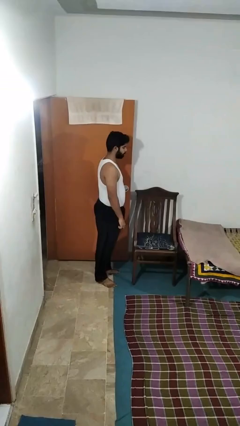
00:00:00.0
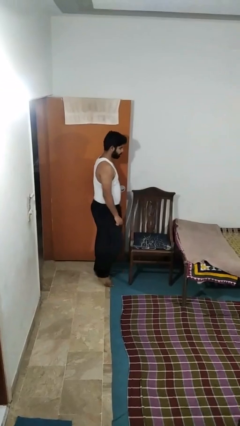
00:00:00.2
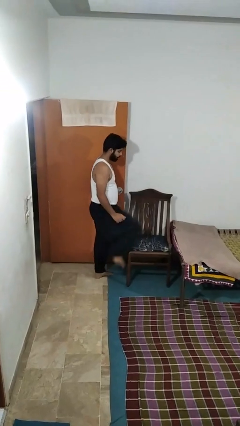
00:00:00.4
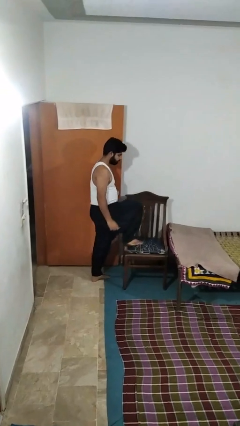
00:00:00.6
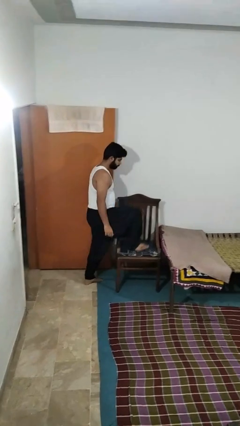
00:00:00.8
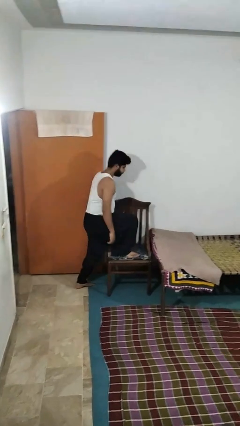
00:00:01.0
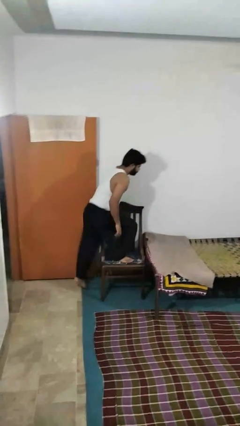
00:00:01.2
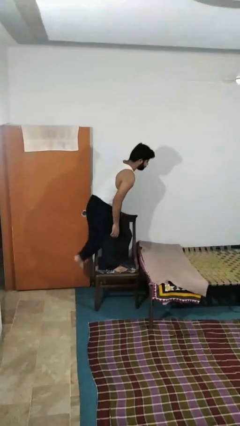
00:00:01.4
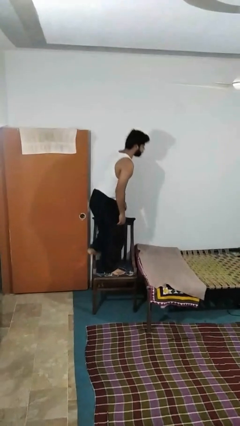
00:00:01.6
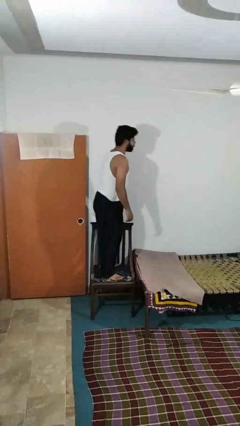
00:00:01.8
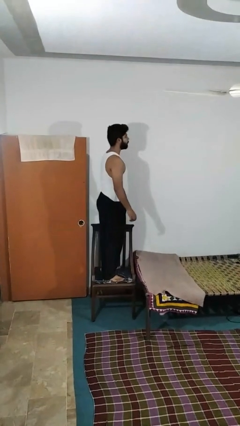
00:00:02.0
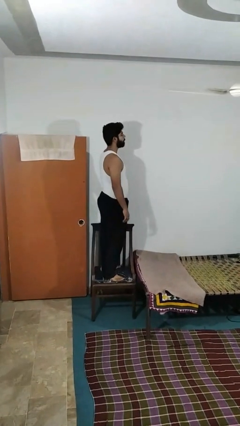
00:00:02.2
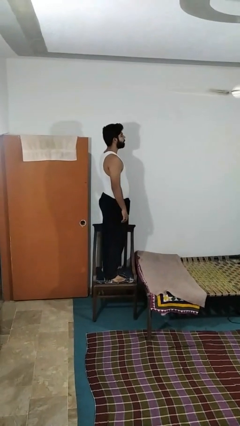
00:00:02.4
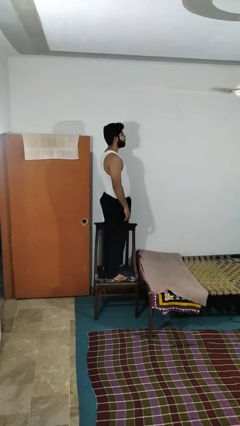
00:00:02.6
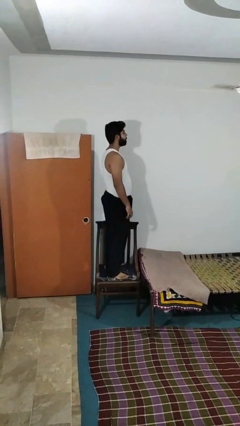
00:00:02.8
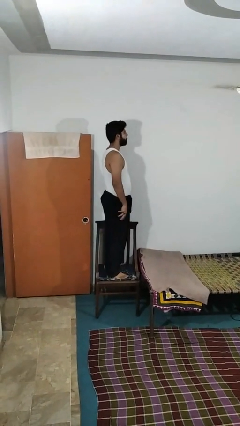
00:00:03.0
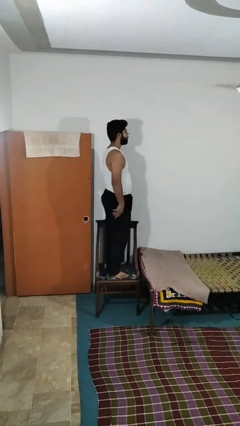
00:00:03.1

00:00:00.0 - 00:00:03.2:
person climbs on chair

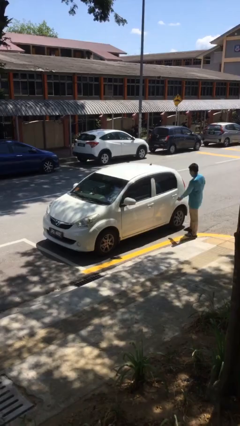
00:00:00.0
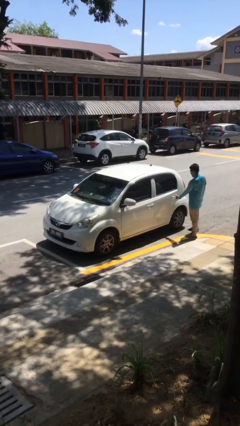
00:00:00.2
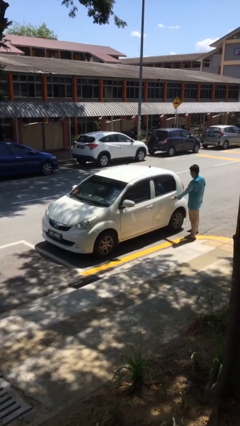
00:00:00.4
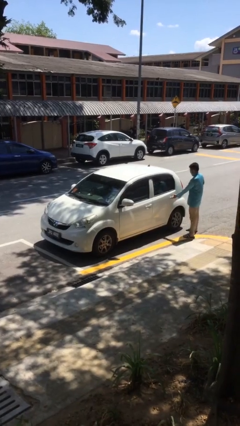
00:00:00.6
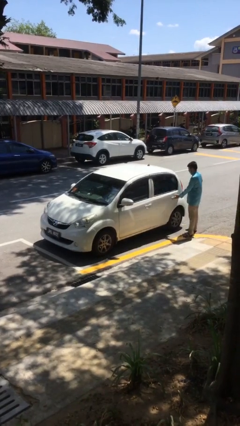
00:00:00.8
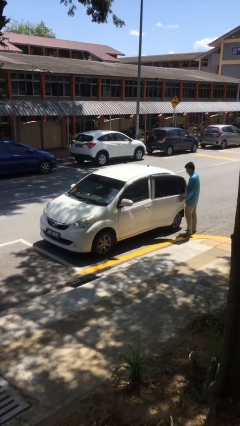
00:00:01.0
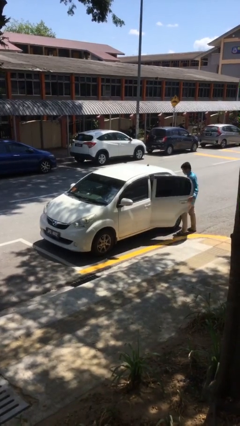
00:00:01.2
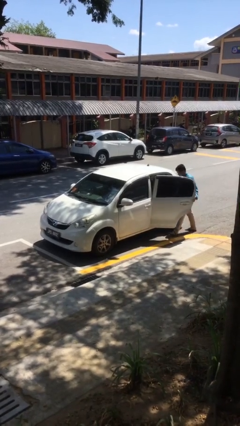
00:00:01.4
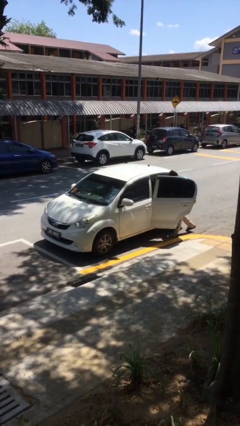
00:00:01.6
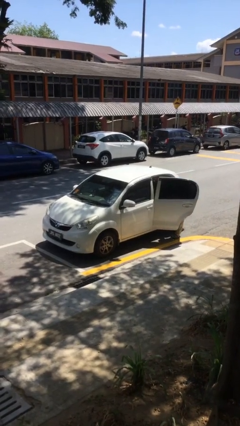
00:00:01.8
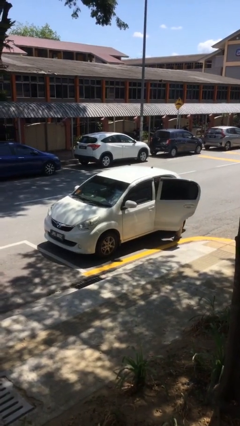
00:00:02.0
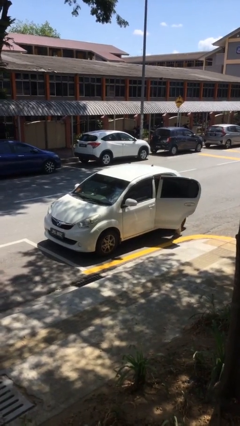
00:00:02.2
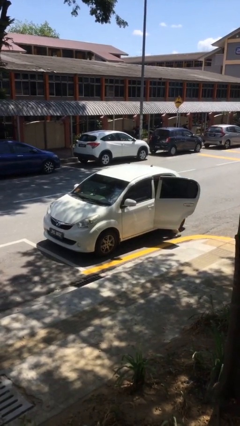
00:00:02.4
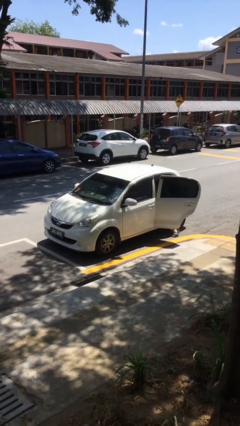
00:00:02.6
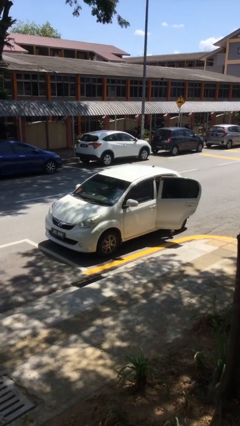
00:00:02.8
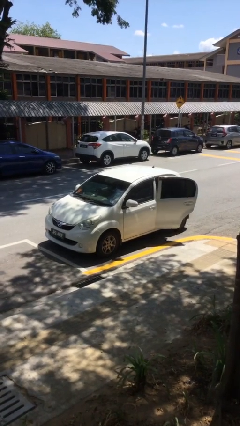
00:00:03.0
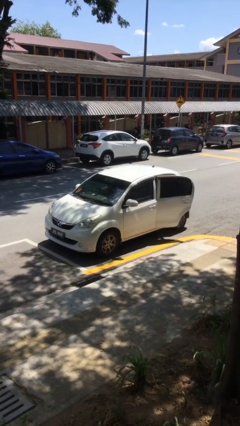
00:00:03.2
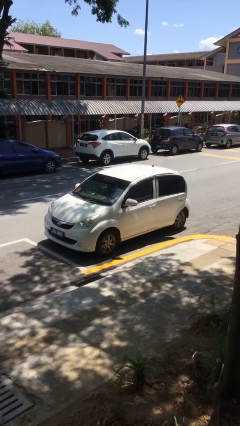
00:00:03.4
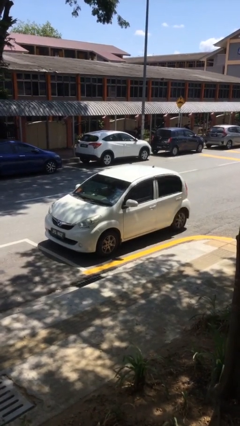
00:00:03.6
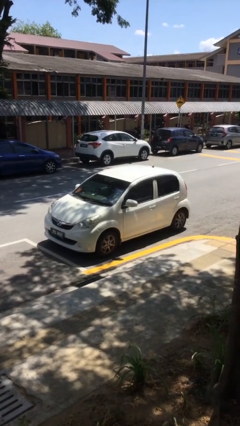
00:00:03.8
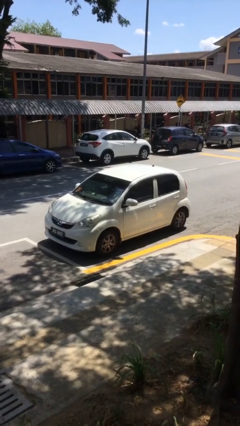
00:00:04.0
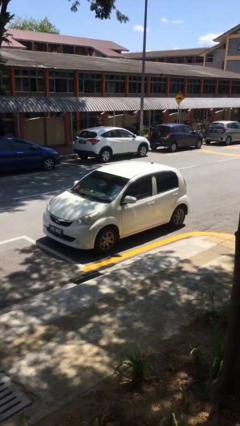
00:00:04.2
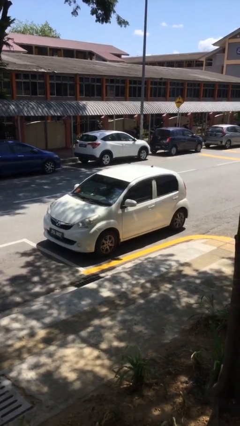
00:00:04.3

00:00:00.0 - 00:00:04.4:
car picks up person

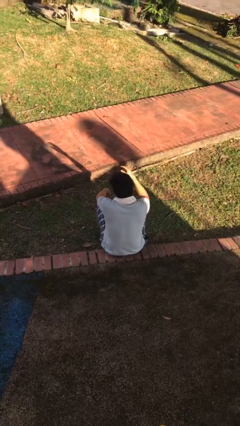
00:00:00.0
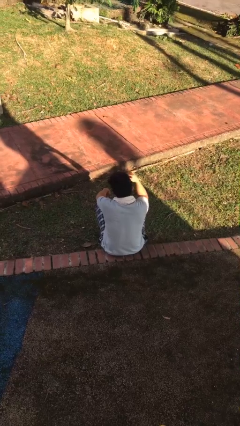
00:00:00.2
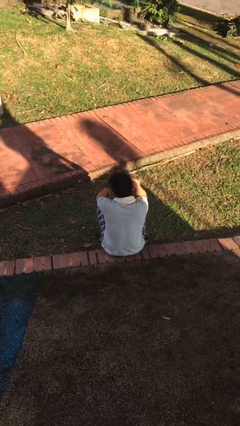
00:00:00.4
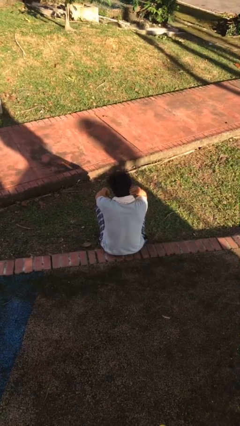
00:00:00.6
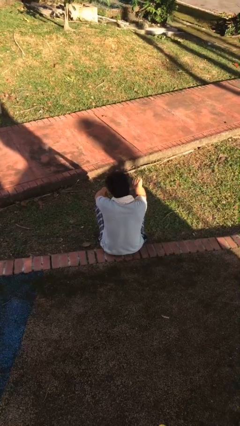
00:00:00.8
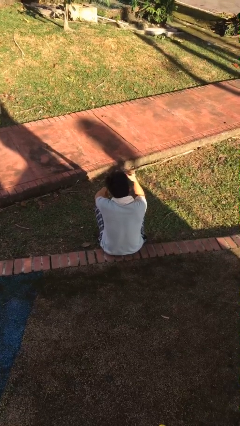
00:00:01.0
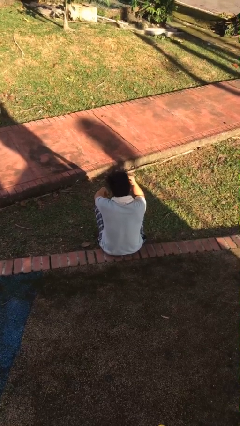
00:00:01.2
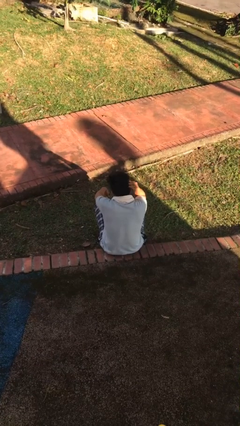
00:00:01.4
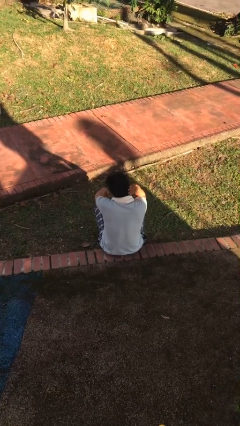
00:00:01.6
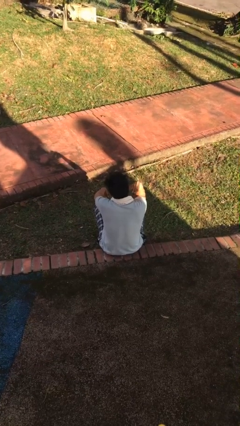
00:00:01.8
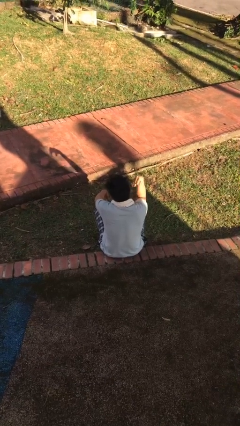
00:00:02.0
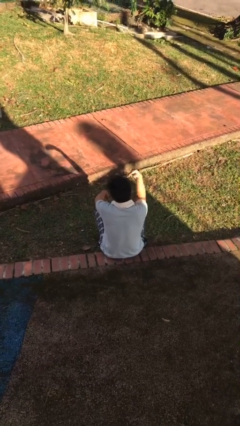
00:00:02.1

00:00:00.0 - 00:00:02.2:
person strokes hair

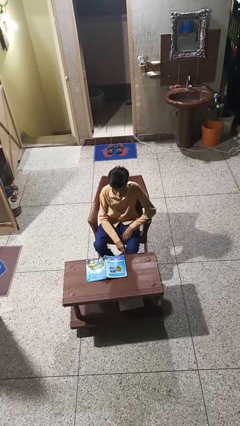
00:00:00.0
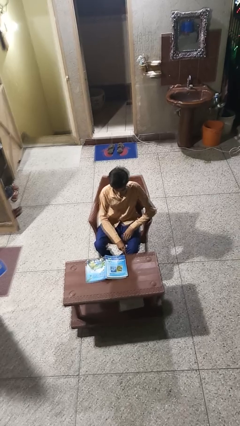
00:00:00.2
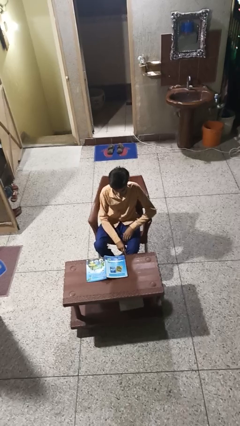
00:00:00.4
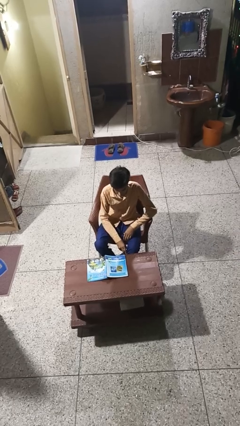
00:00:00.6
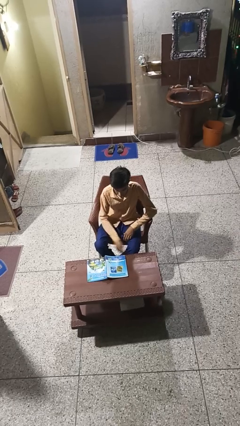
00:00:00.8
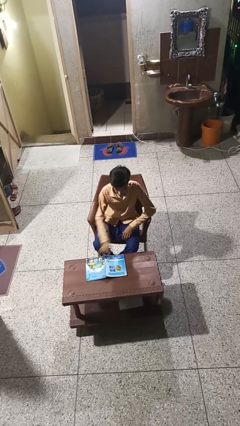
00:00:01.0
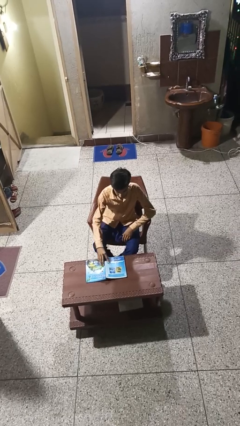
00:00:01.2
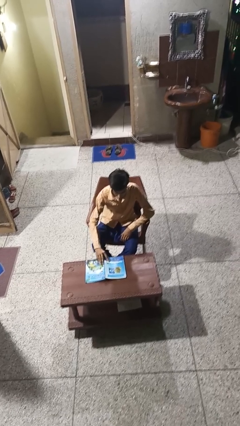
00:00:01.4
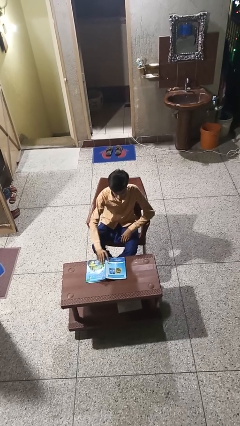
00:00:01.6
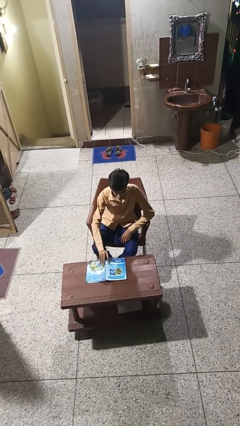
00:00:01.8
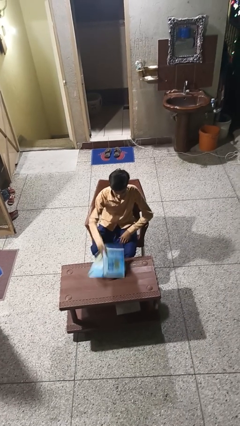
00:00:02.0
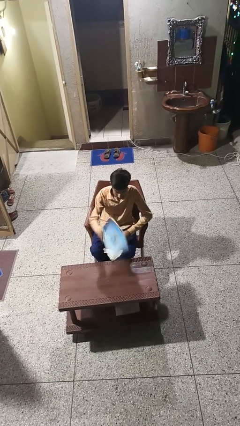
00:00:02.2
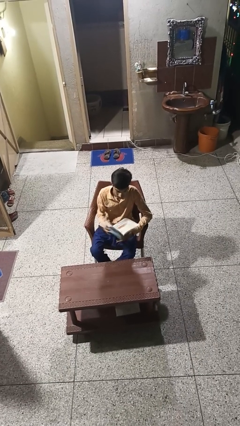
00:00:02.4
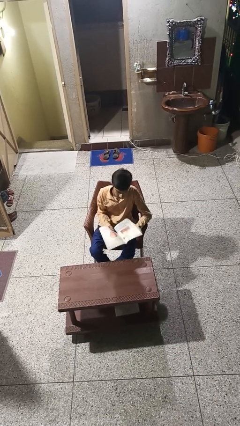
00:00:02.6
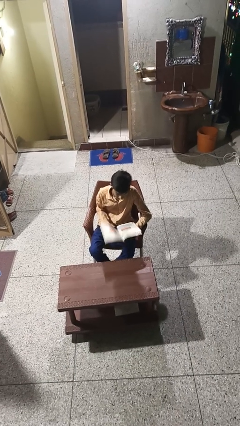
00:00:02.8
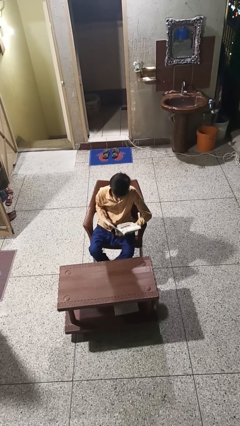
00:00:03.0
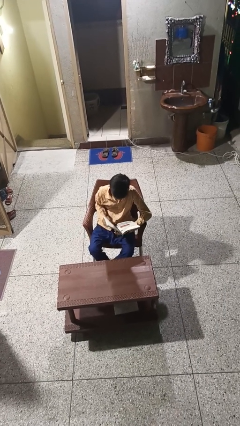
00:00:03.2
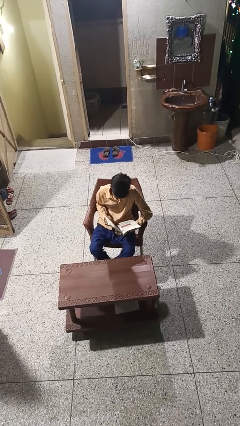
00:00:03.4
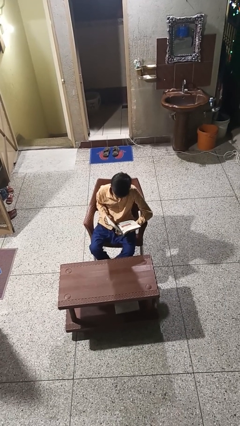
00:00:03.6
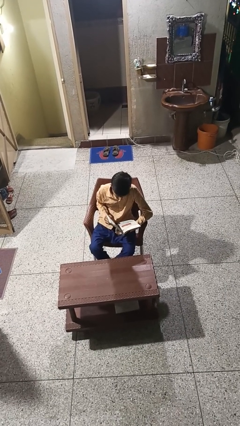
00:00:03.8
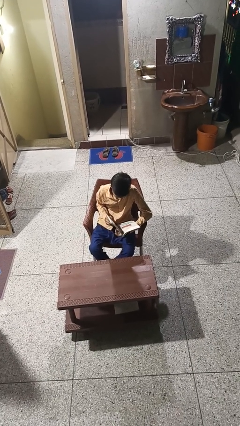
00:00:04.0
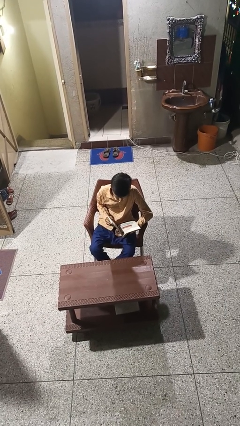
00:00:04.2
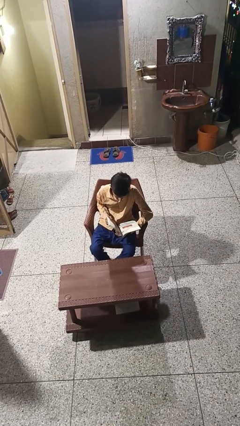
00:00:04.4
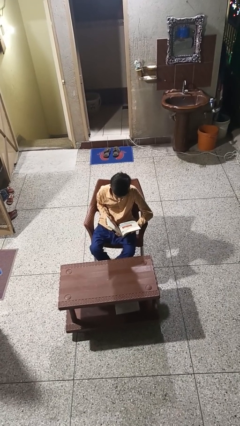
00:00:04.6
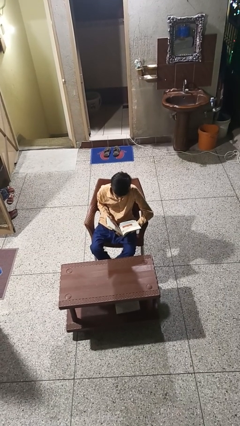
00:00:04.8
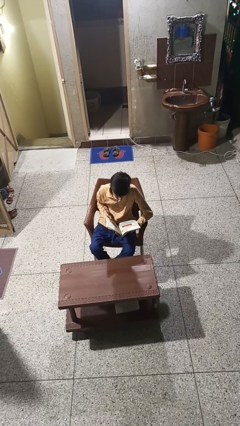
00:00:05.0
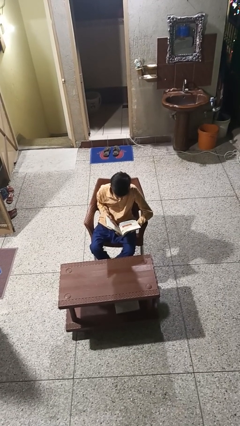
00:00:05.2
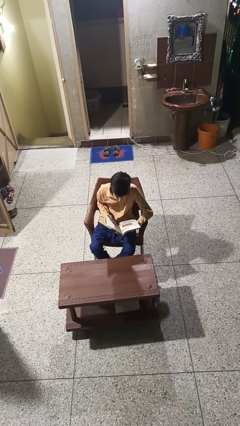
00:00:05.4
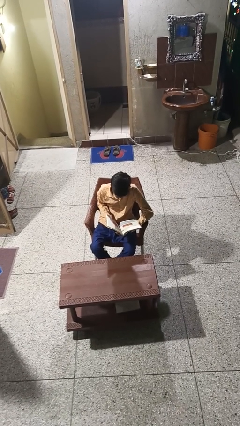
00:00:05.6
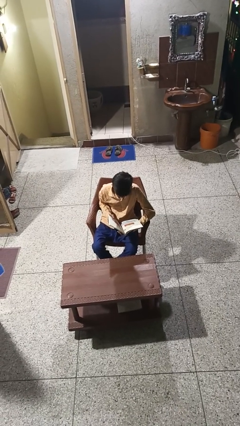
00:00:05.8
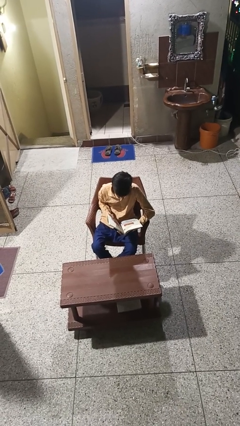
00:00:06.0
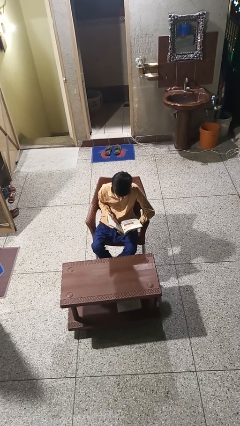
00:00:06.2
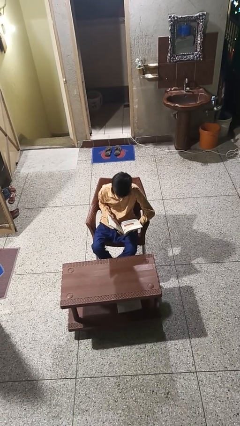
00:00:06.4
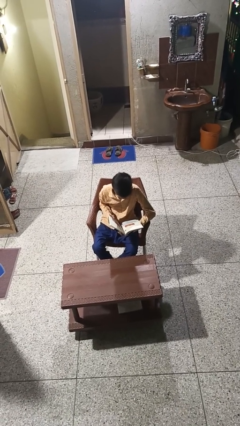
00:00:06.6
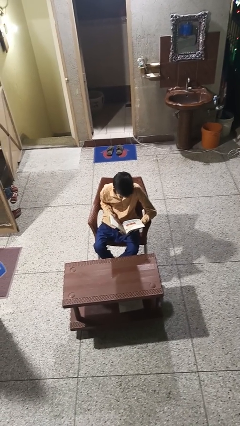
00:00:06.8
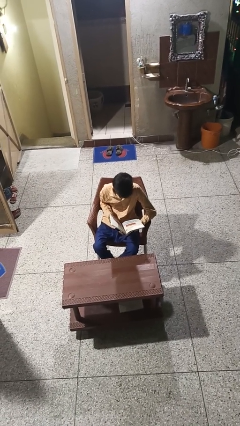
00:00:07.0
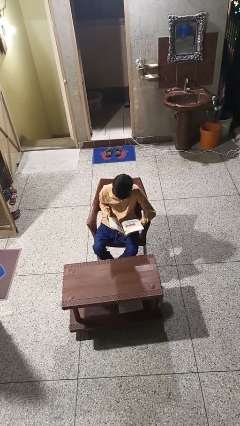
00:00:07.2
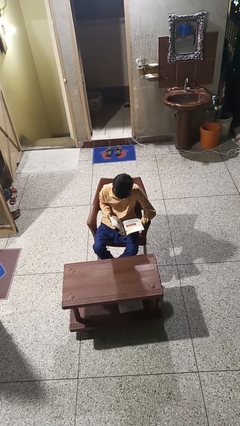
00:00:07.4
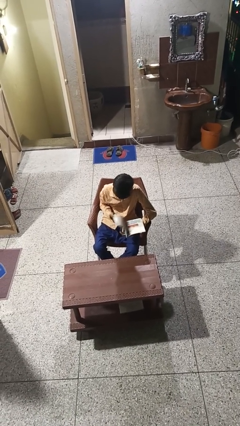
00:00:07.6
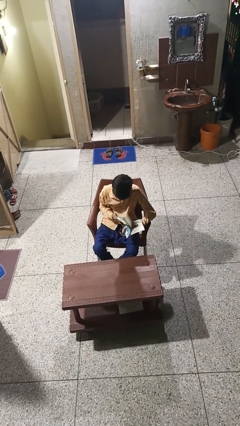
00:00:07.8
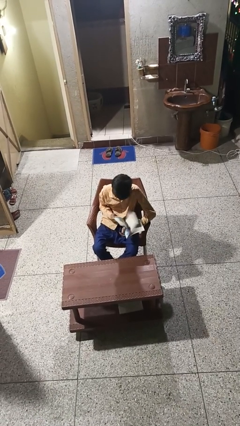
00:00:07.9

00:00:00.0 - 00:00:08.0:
person reads book
